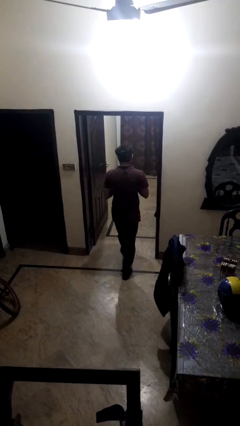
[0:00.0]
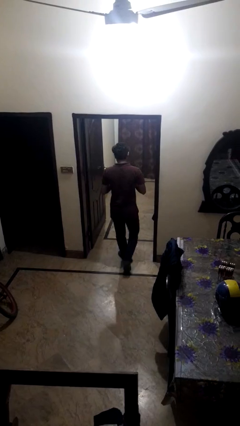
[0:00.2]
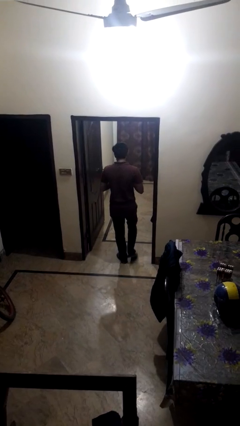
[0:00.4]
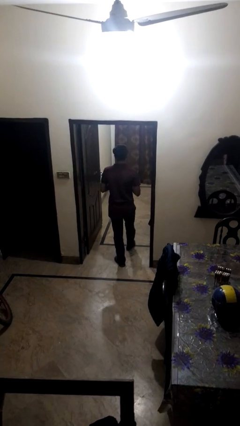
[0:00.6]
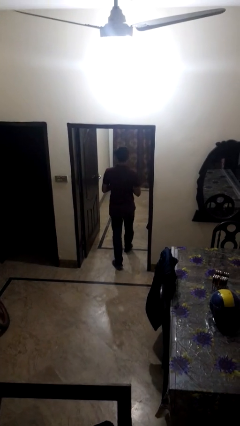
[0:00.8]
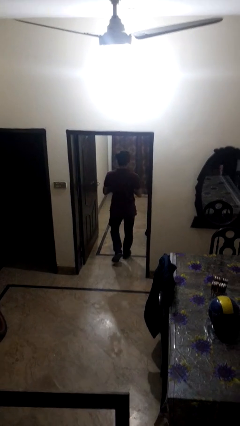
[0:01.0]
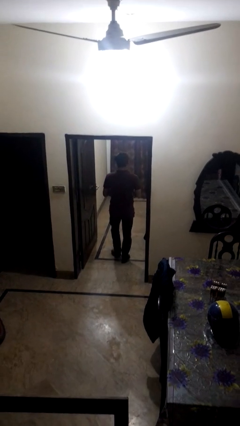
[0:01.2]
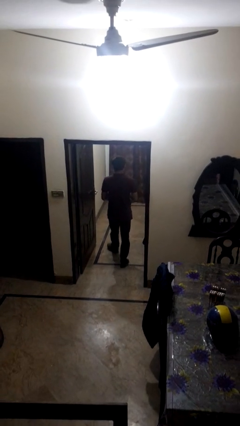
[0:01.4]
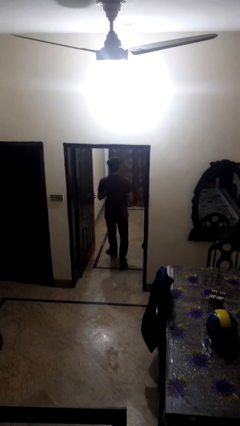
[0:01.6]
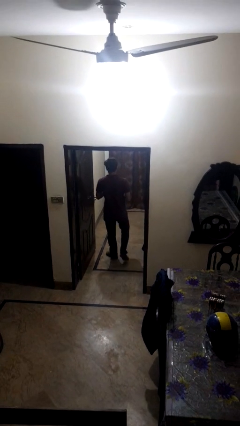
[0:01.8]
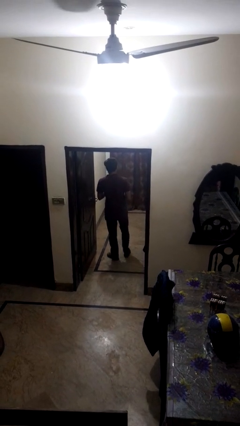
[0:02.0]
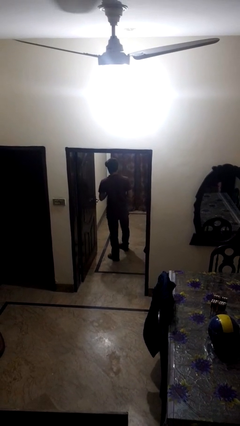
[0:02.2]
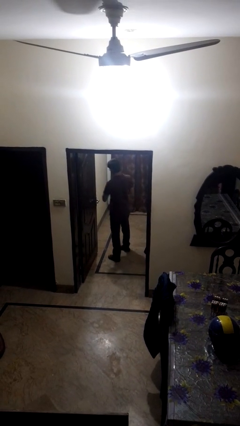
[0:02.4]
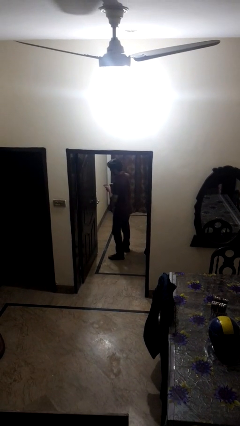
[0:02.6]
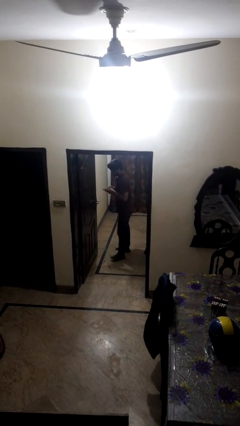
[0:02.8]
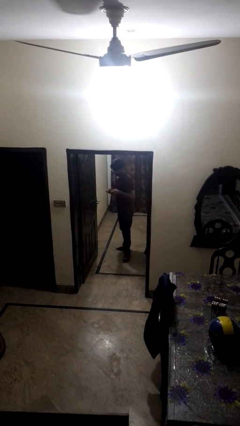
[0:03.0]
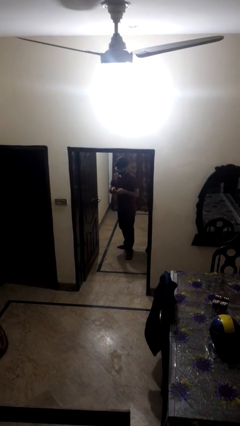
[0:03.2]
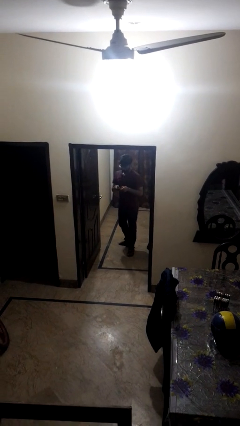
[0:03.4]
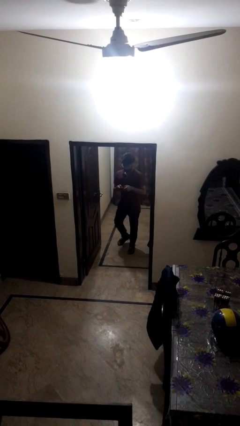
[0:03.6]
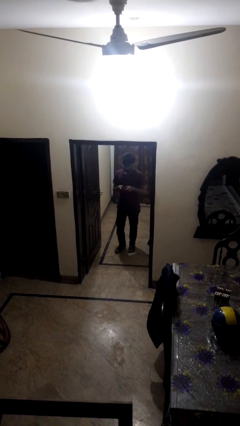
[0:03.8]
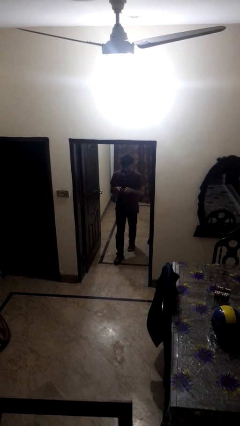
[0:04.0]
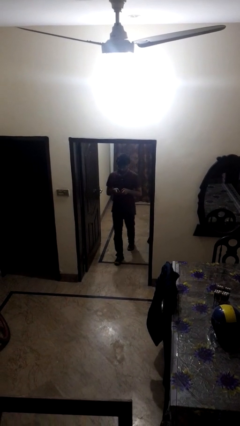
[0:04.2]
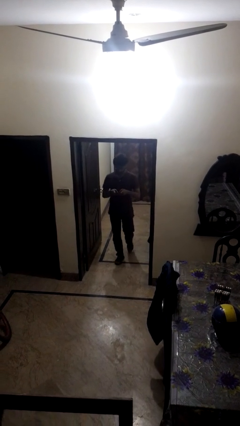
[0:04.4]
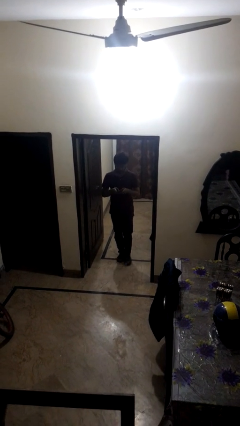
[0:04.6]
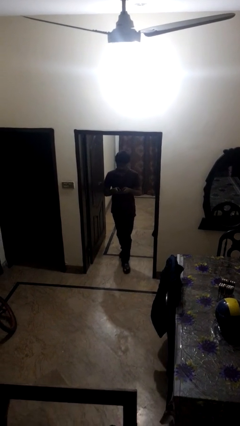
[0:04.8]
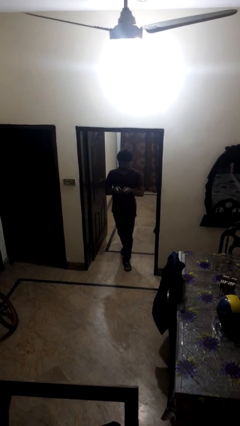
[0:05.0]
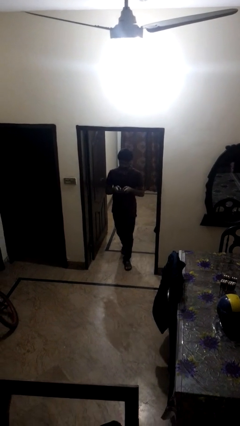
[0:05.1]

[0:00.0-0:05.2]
person exits scene through structure

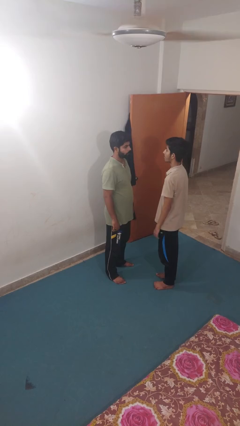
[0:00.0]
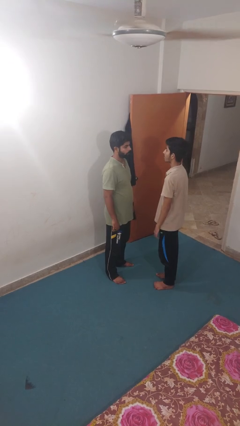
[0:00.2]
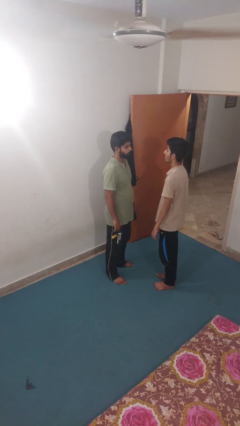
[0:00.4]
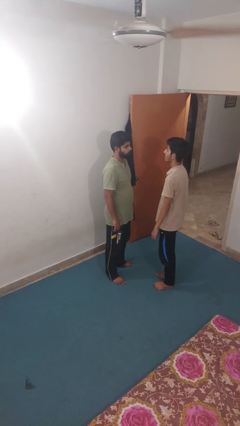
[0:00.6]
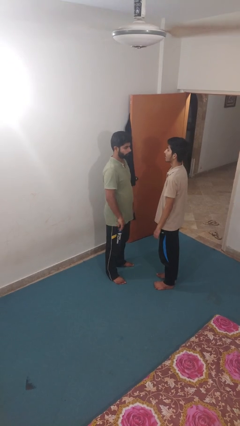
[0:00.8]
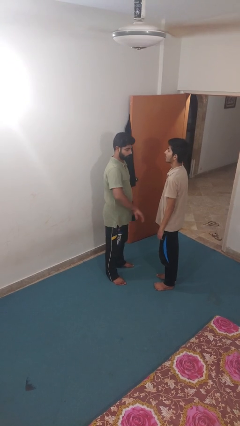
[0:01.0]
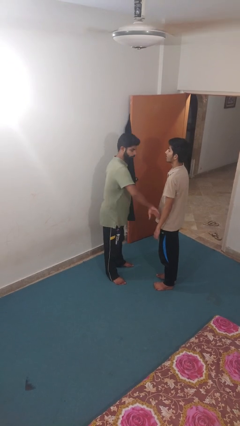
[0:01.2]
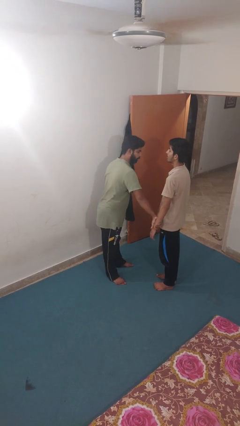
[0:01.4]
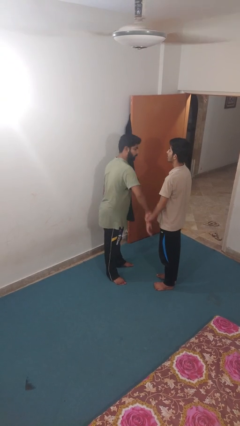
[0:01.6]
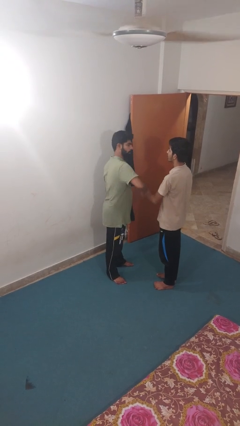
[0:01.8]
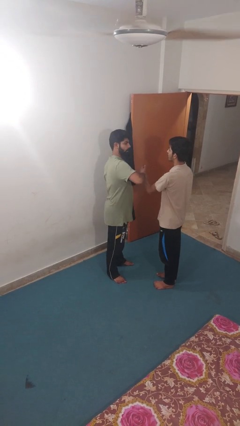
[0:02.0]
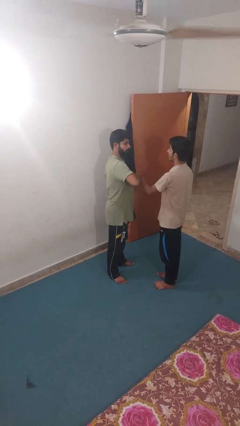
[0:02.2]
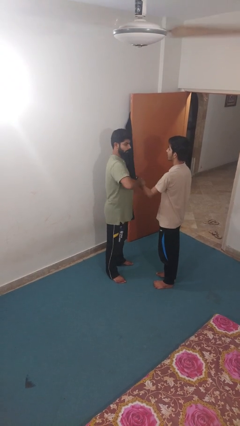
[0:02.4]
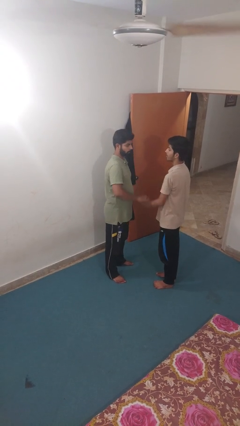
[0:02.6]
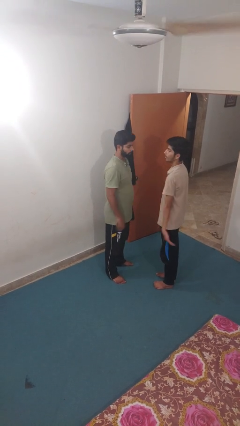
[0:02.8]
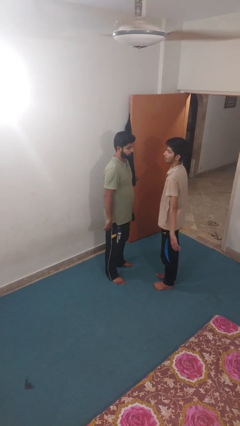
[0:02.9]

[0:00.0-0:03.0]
person grabs person by forearm

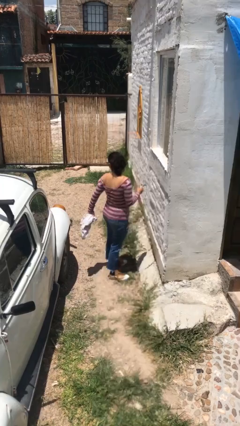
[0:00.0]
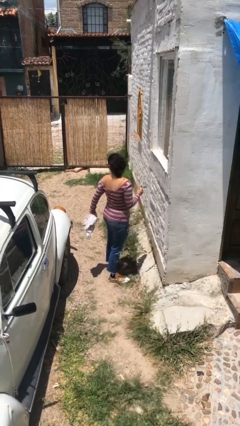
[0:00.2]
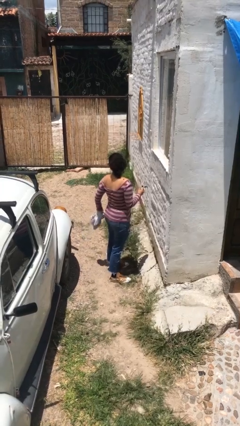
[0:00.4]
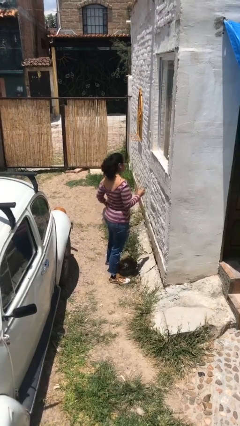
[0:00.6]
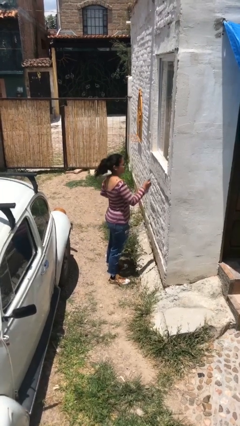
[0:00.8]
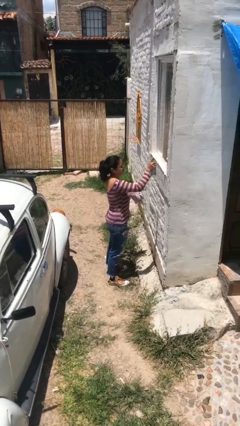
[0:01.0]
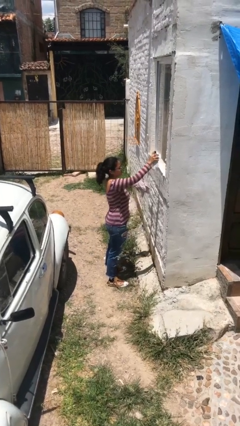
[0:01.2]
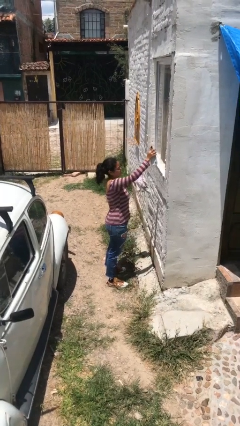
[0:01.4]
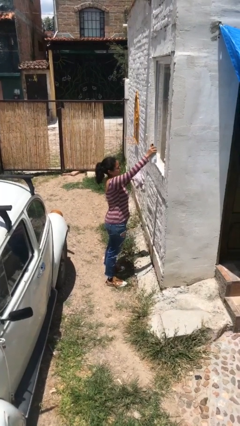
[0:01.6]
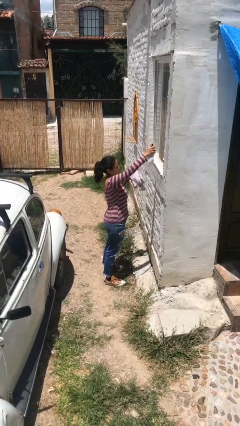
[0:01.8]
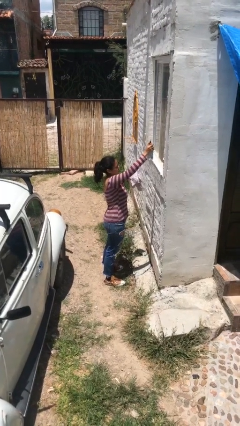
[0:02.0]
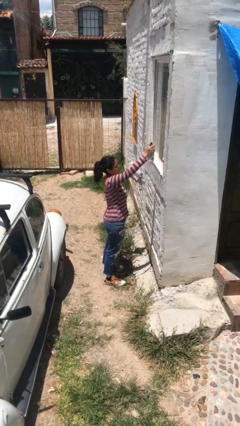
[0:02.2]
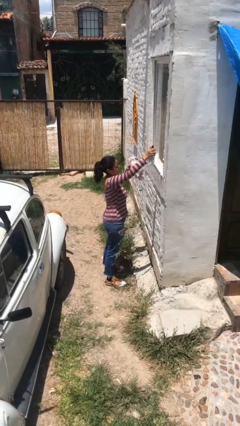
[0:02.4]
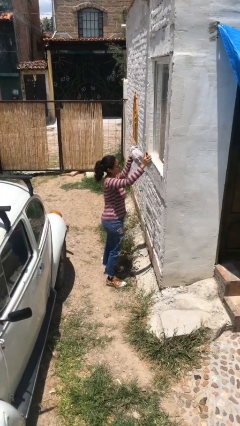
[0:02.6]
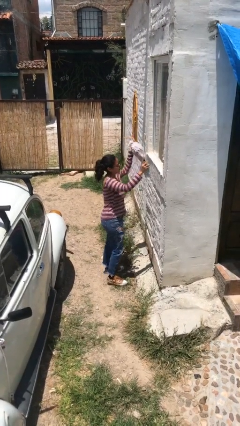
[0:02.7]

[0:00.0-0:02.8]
person sprays from bottle

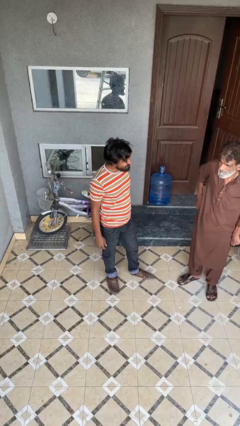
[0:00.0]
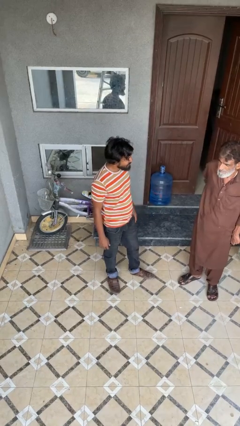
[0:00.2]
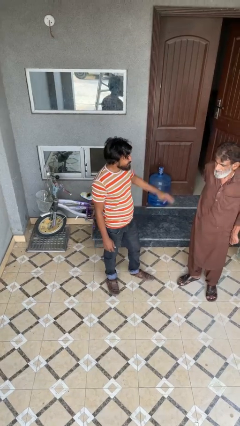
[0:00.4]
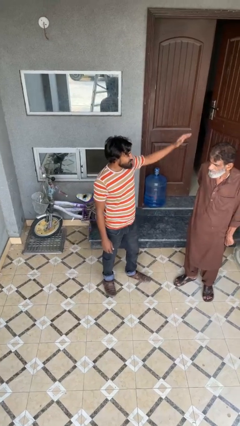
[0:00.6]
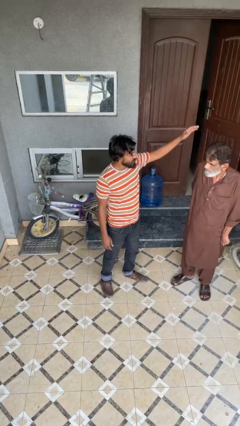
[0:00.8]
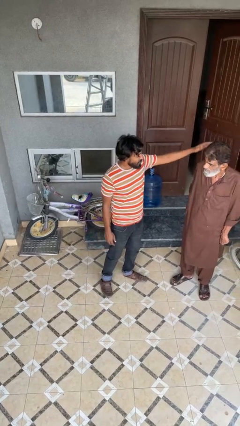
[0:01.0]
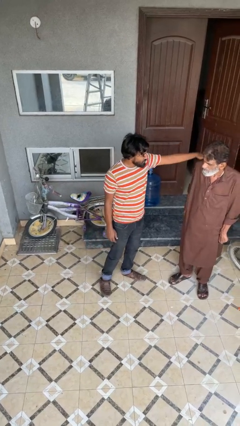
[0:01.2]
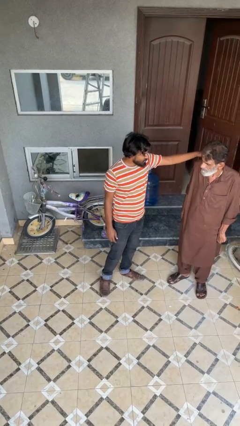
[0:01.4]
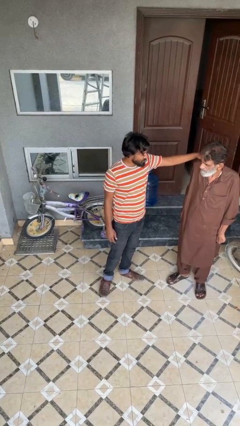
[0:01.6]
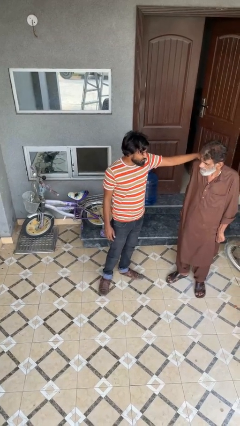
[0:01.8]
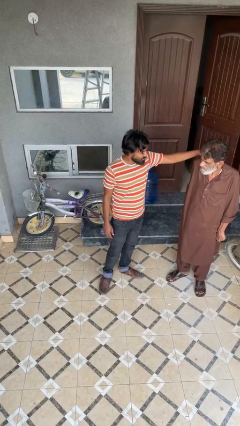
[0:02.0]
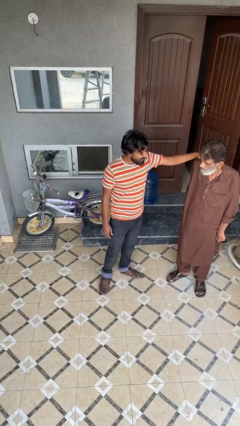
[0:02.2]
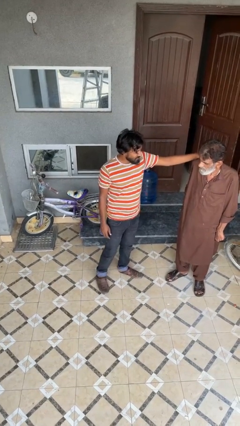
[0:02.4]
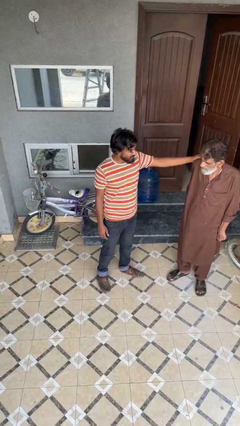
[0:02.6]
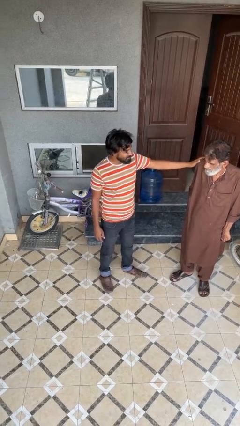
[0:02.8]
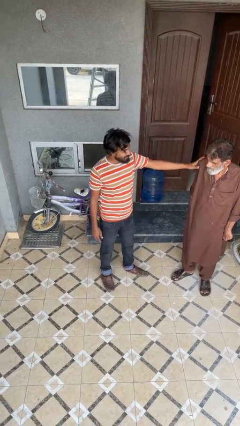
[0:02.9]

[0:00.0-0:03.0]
person pounds shoulders of person

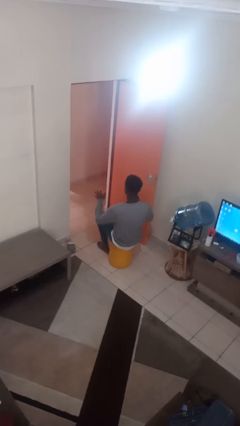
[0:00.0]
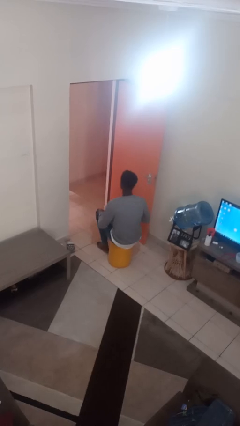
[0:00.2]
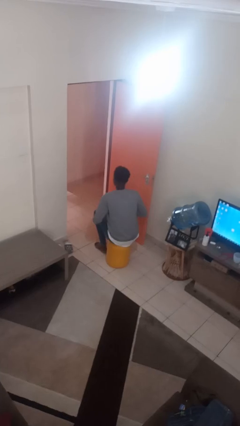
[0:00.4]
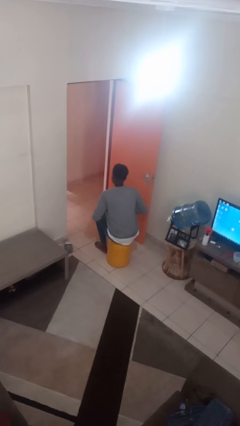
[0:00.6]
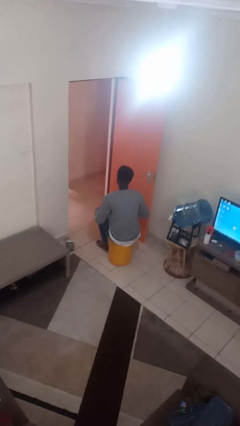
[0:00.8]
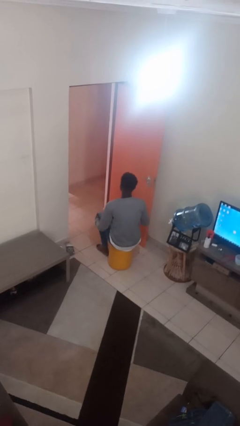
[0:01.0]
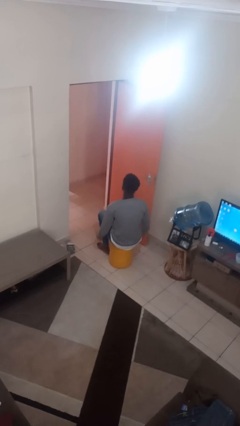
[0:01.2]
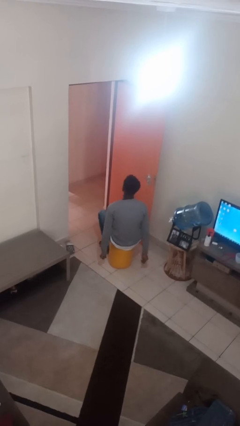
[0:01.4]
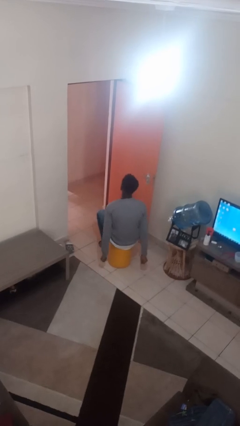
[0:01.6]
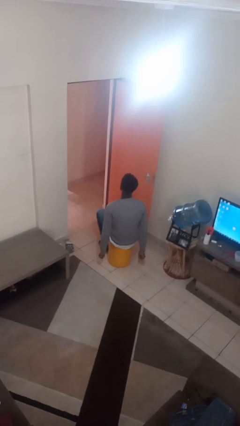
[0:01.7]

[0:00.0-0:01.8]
person slaps hands on thighs

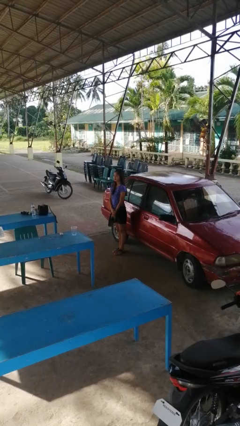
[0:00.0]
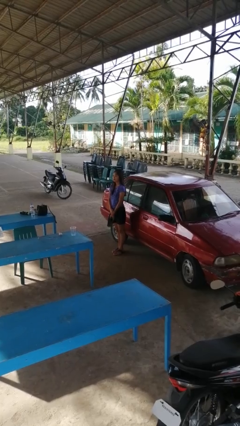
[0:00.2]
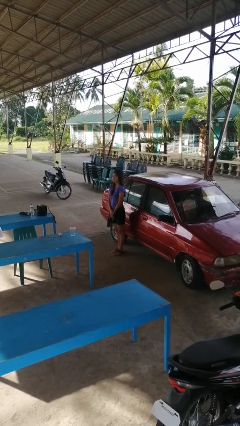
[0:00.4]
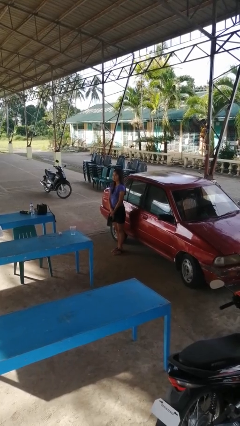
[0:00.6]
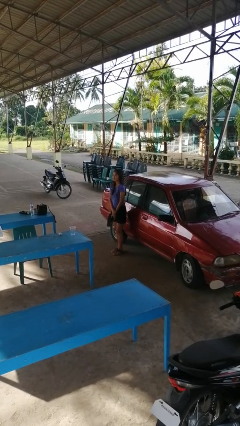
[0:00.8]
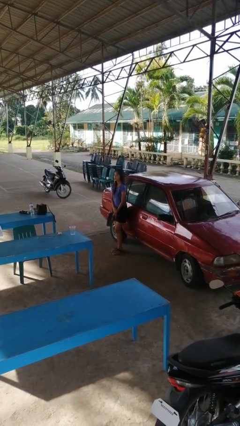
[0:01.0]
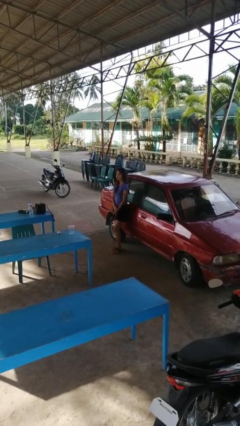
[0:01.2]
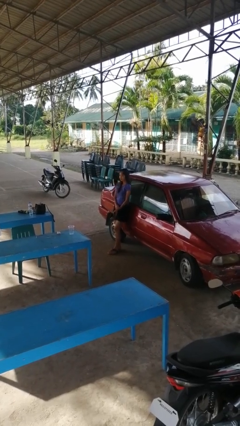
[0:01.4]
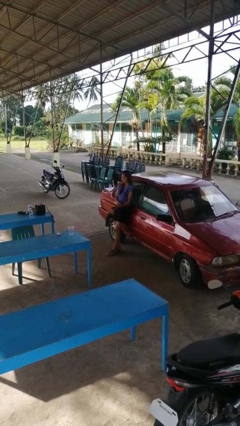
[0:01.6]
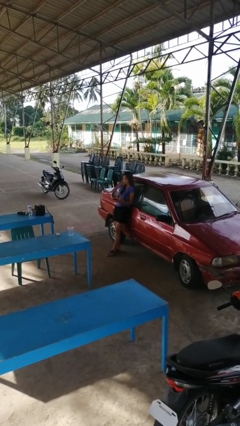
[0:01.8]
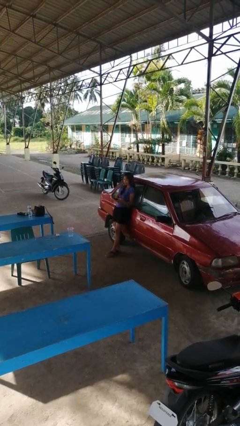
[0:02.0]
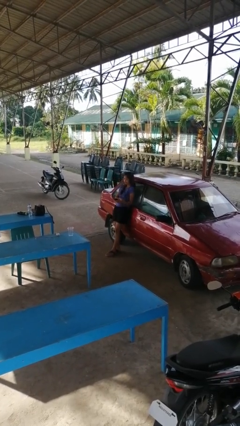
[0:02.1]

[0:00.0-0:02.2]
person leans against car
